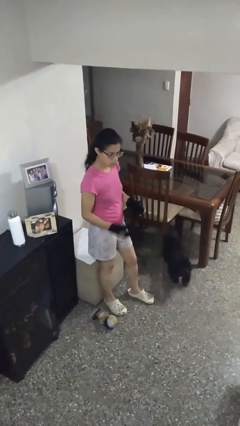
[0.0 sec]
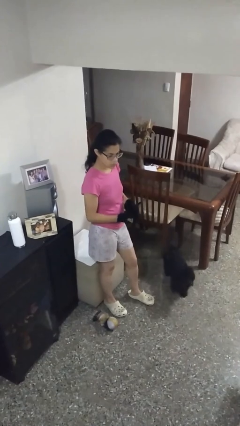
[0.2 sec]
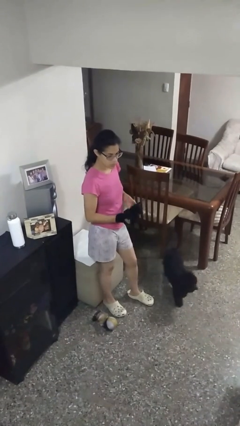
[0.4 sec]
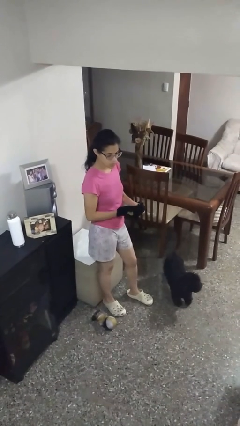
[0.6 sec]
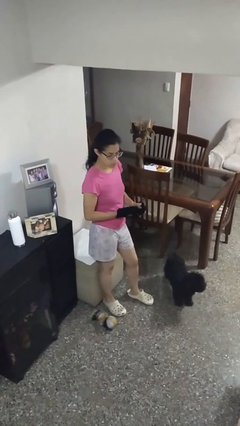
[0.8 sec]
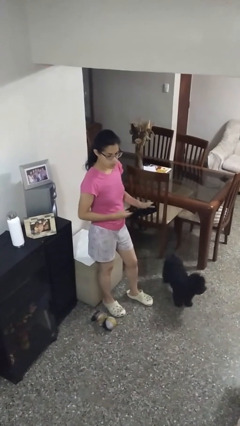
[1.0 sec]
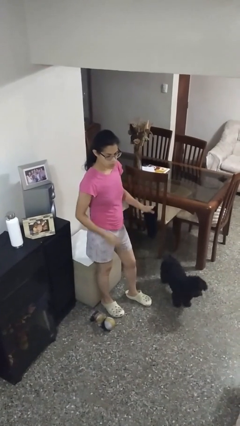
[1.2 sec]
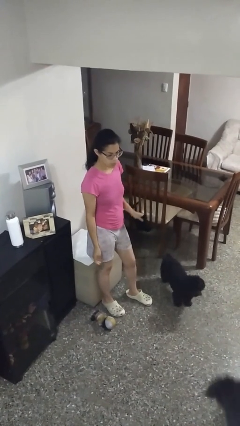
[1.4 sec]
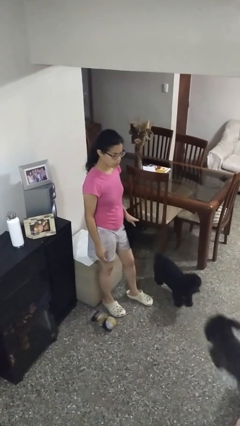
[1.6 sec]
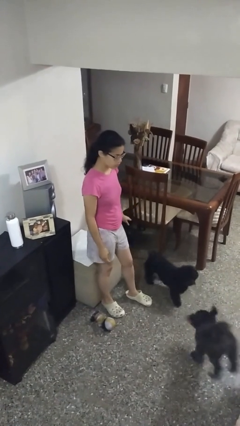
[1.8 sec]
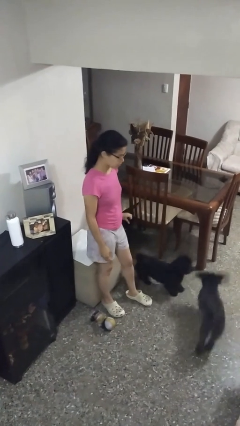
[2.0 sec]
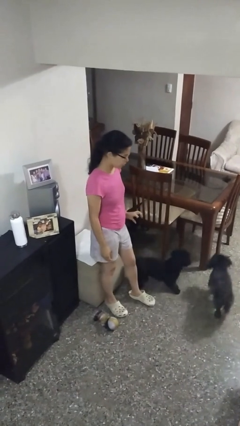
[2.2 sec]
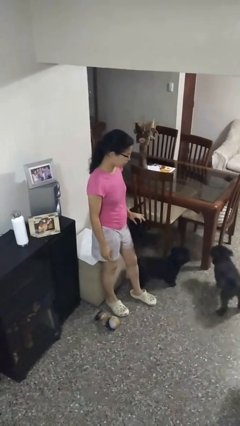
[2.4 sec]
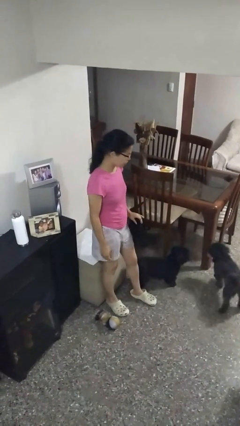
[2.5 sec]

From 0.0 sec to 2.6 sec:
person takes off gloves

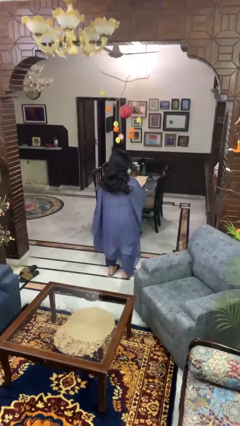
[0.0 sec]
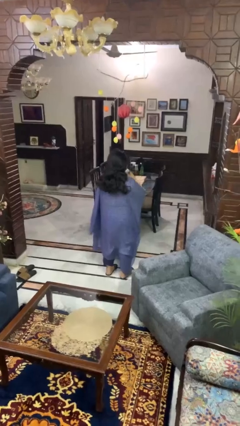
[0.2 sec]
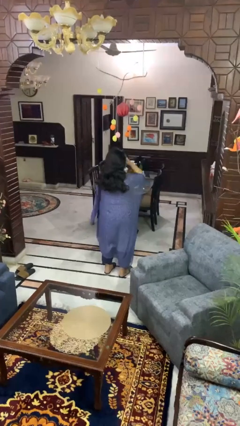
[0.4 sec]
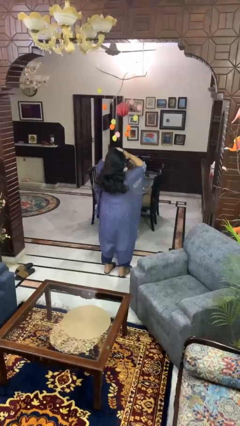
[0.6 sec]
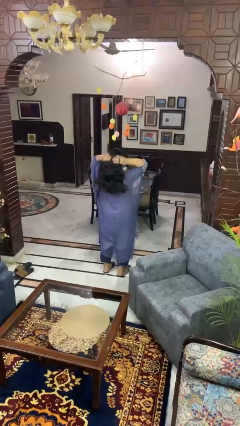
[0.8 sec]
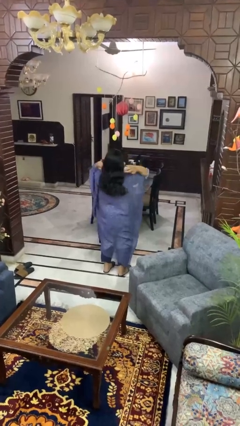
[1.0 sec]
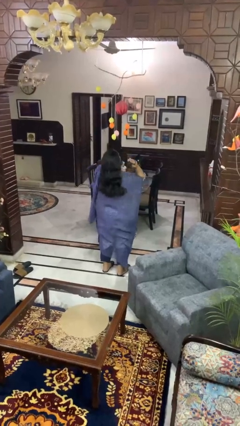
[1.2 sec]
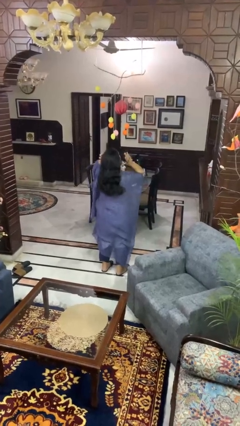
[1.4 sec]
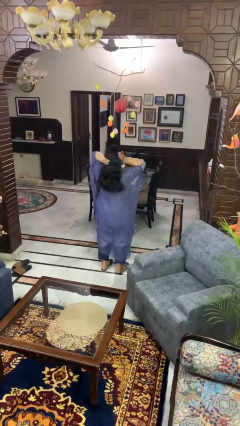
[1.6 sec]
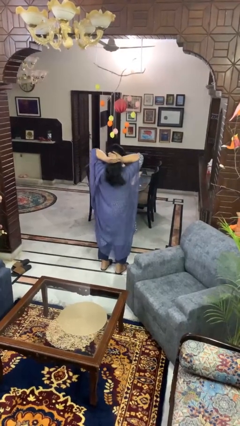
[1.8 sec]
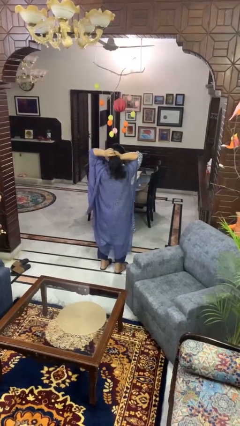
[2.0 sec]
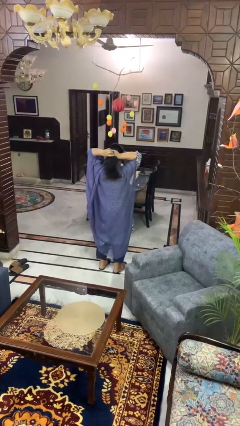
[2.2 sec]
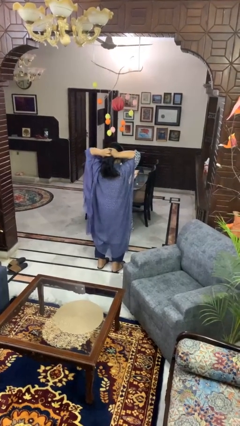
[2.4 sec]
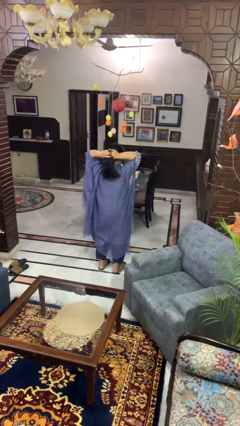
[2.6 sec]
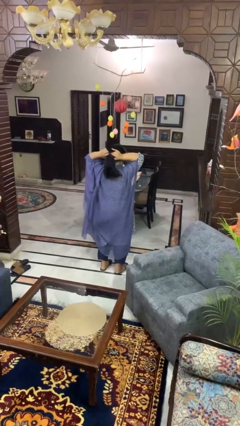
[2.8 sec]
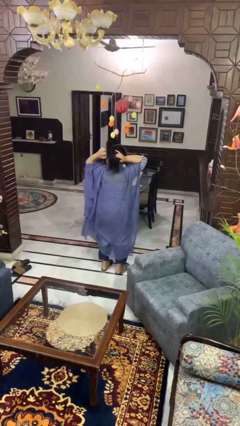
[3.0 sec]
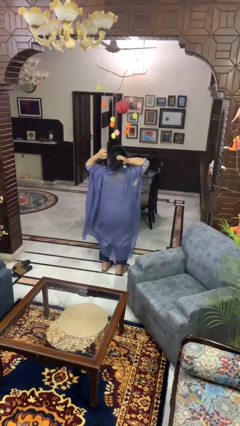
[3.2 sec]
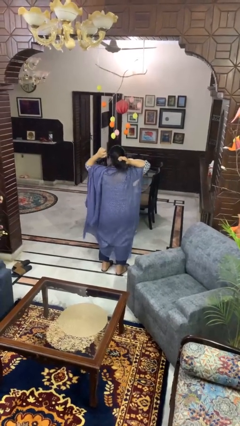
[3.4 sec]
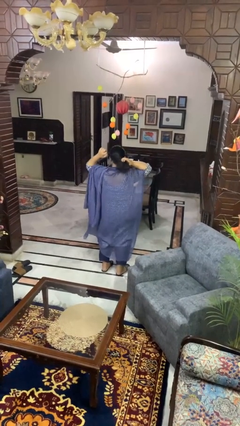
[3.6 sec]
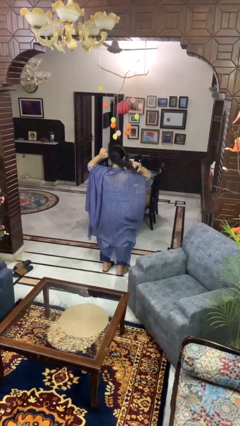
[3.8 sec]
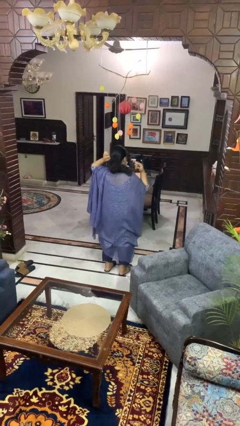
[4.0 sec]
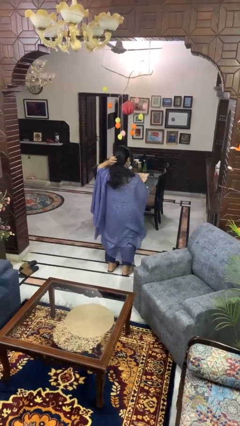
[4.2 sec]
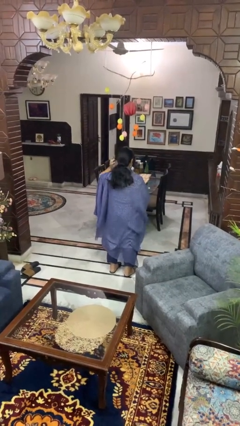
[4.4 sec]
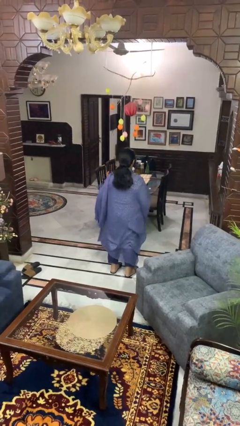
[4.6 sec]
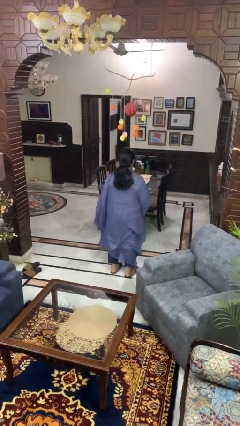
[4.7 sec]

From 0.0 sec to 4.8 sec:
person puts hair in ponytail

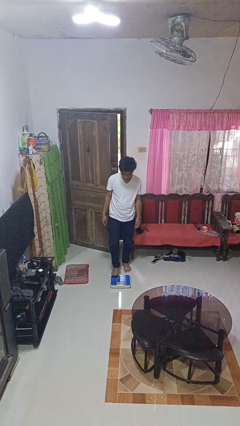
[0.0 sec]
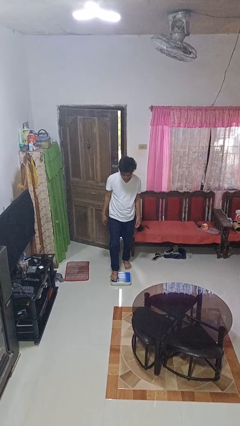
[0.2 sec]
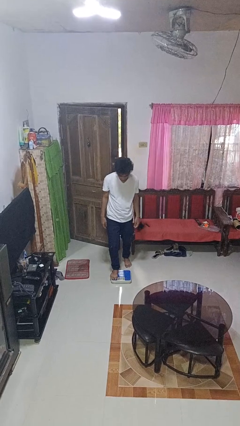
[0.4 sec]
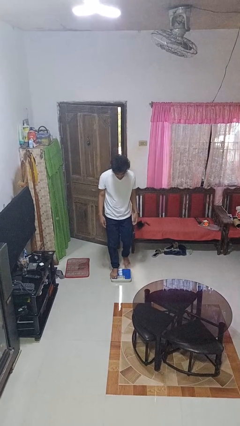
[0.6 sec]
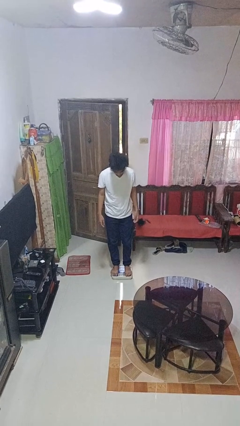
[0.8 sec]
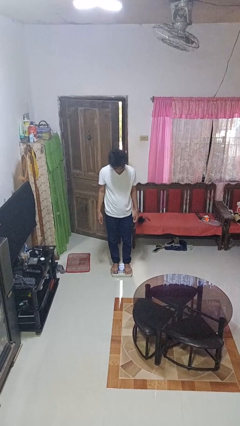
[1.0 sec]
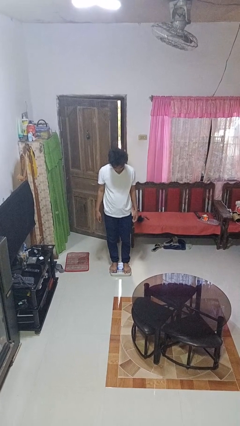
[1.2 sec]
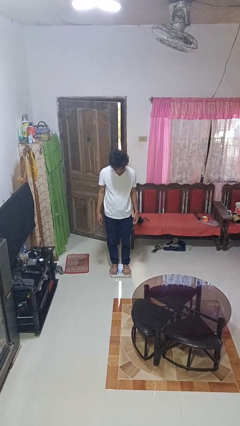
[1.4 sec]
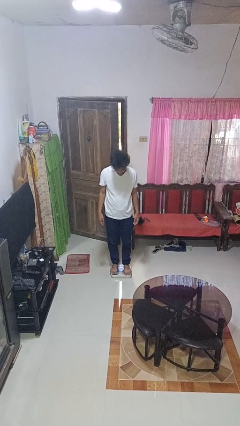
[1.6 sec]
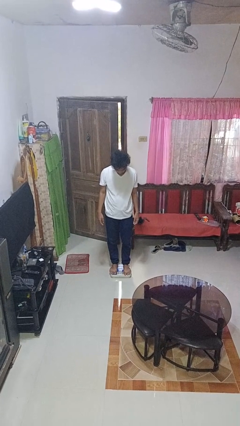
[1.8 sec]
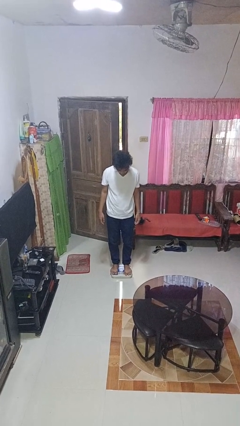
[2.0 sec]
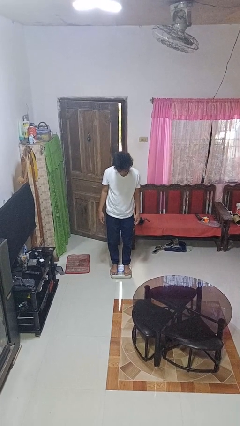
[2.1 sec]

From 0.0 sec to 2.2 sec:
person uses bodyweight scale

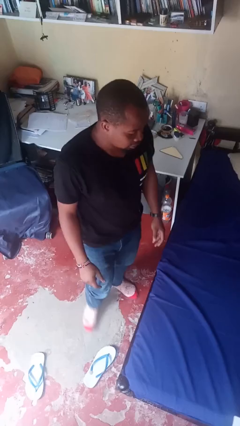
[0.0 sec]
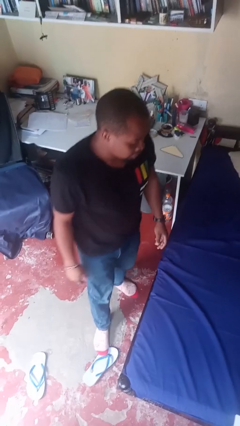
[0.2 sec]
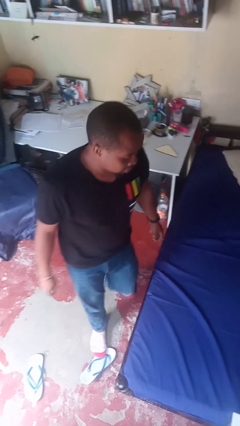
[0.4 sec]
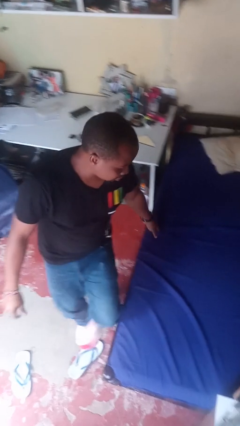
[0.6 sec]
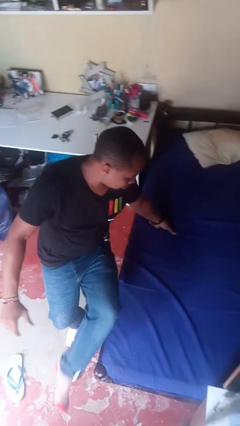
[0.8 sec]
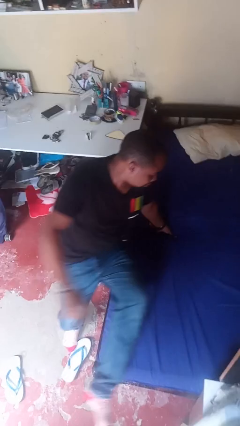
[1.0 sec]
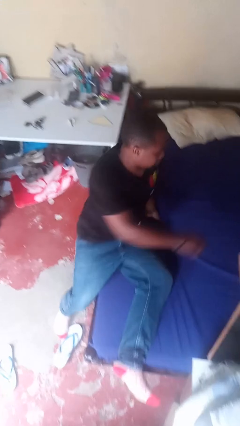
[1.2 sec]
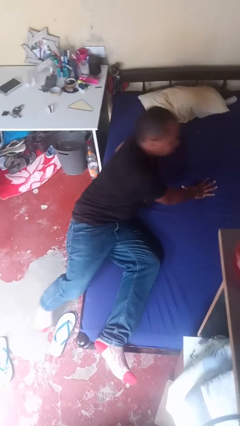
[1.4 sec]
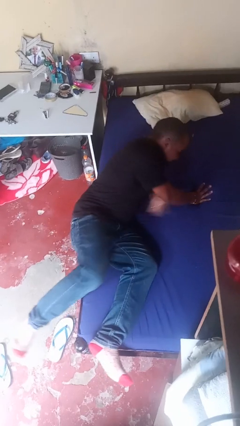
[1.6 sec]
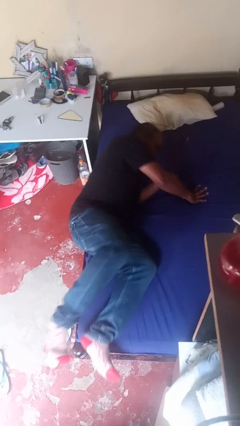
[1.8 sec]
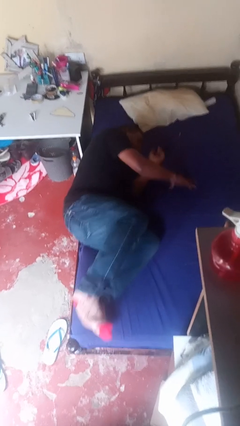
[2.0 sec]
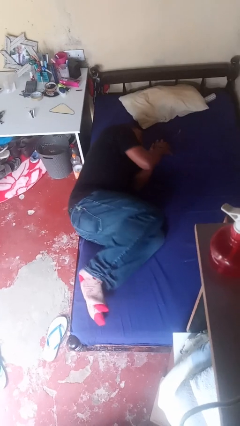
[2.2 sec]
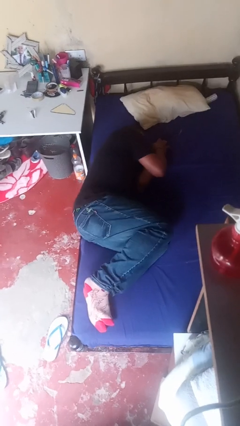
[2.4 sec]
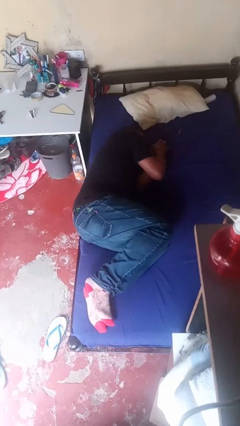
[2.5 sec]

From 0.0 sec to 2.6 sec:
person lies down on bed

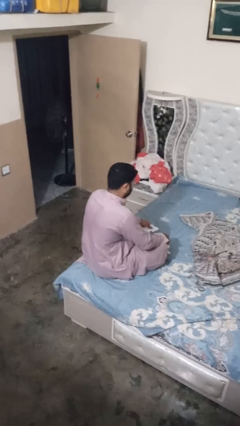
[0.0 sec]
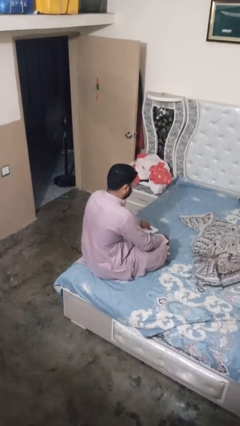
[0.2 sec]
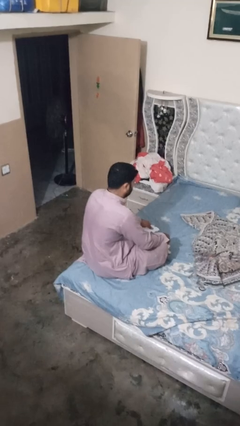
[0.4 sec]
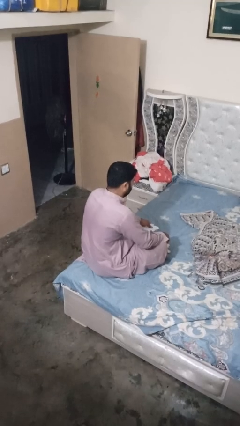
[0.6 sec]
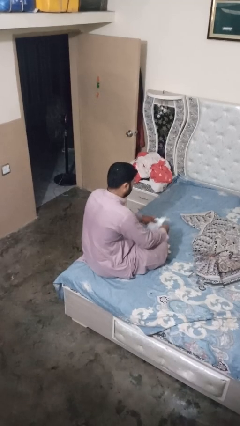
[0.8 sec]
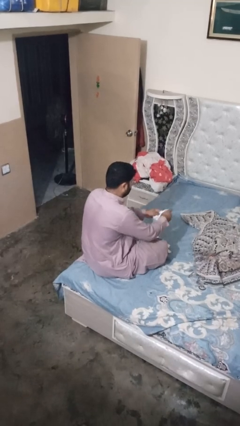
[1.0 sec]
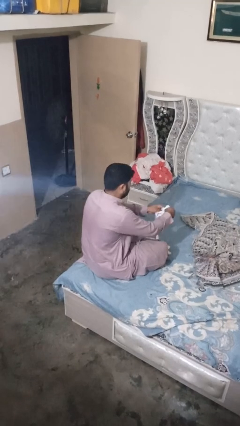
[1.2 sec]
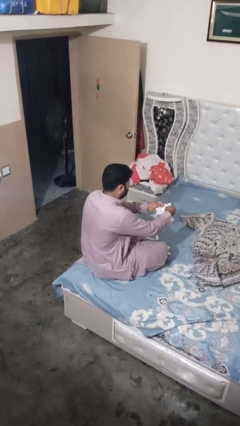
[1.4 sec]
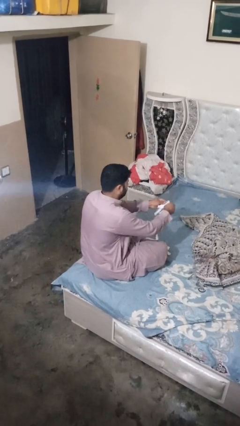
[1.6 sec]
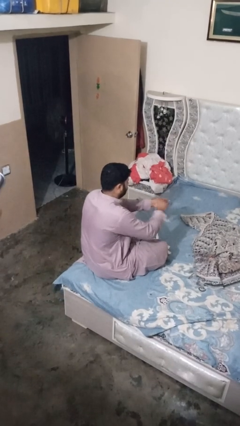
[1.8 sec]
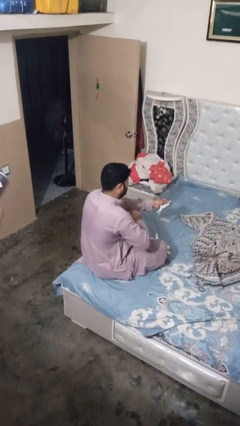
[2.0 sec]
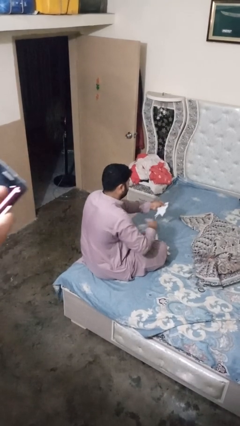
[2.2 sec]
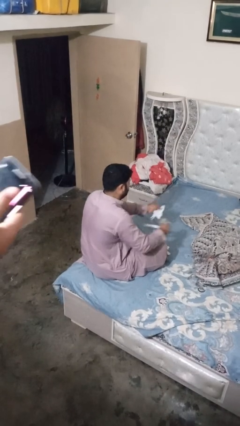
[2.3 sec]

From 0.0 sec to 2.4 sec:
person tears paper

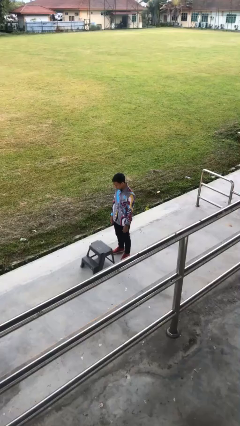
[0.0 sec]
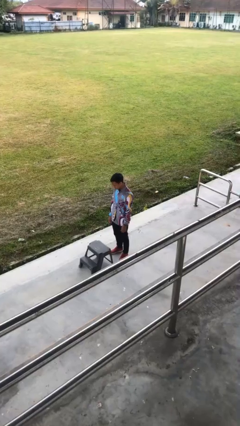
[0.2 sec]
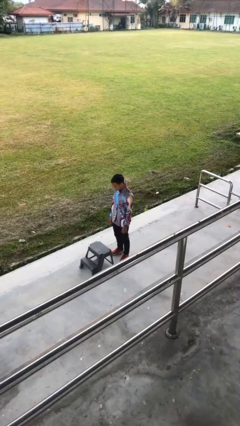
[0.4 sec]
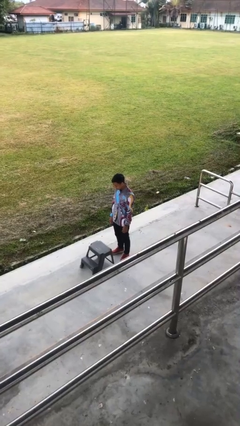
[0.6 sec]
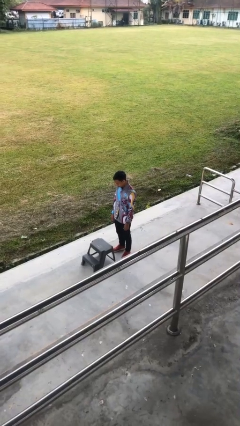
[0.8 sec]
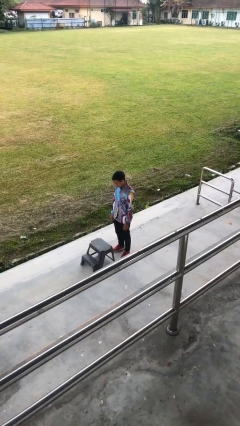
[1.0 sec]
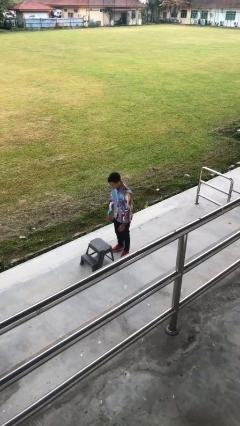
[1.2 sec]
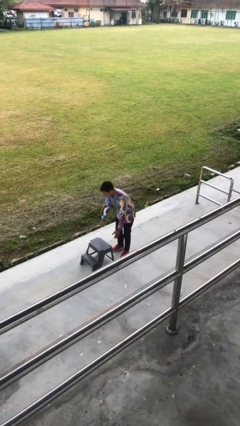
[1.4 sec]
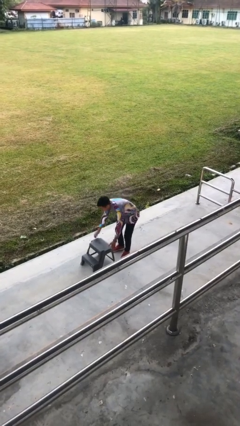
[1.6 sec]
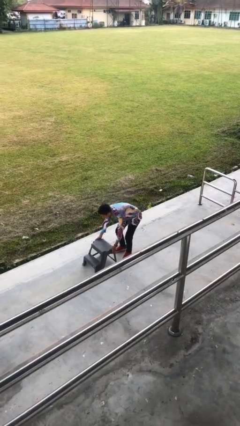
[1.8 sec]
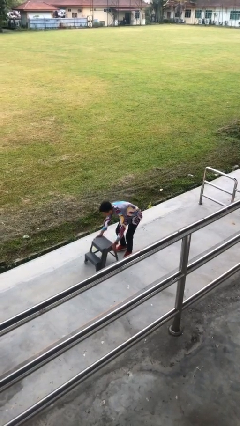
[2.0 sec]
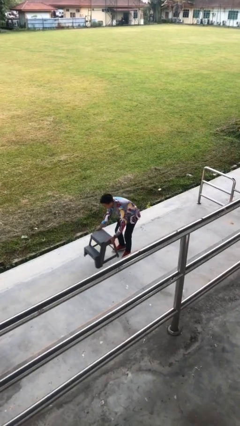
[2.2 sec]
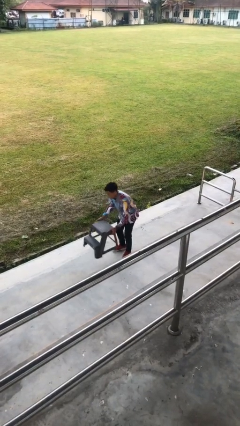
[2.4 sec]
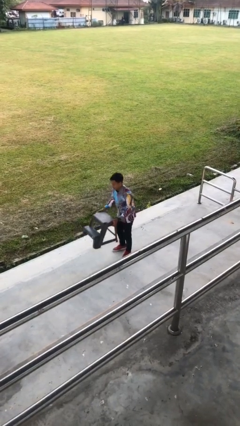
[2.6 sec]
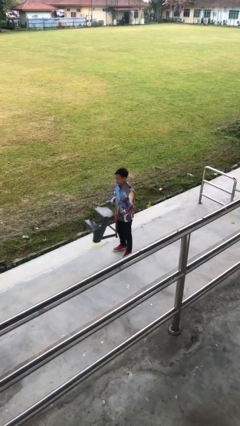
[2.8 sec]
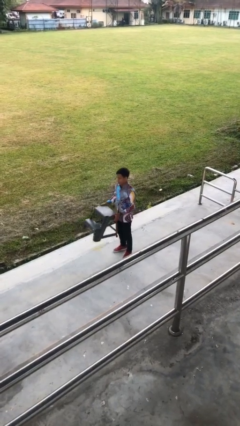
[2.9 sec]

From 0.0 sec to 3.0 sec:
person picks up object from floor
